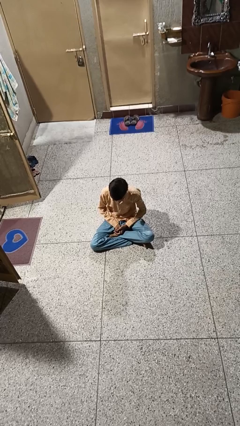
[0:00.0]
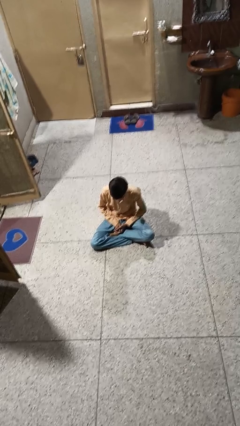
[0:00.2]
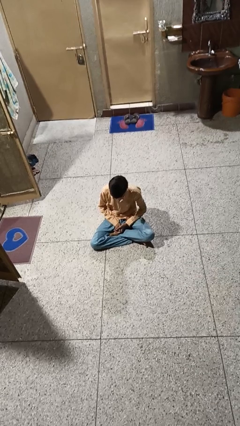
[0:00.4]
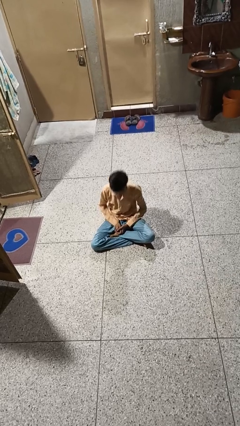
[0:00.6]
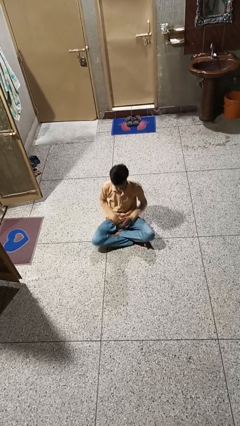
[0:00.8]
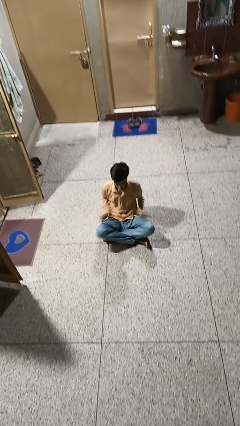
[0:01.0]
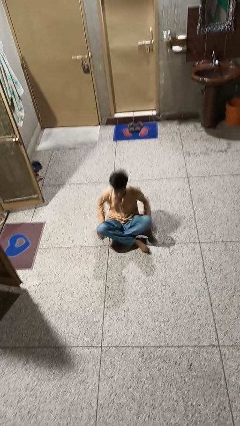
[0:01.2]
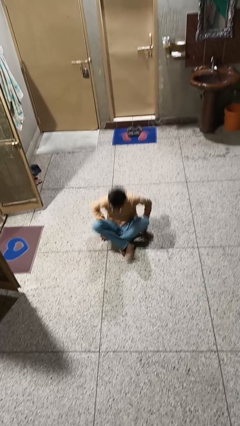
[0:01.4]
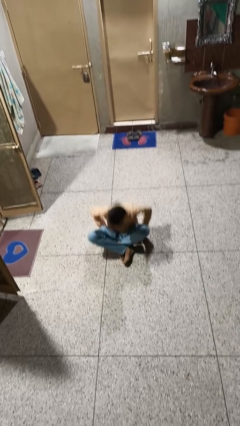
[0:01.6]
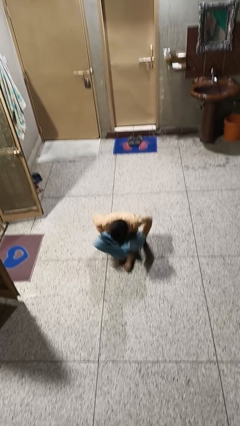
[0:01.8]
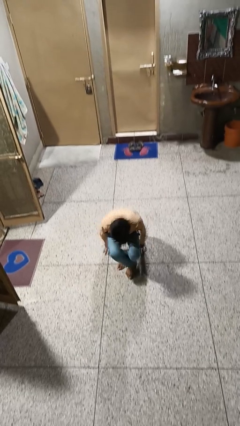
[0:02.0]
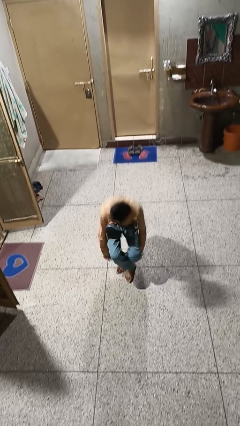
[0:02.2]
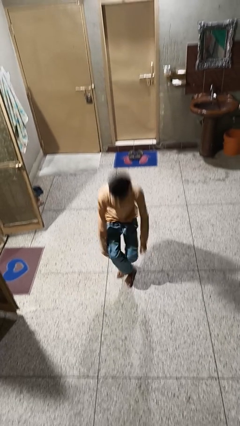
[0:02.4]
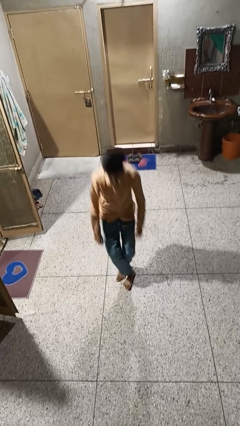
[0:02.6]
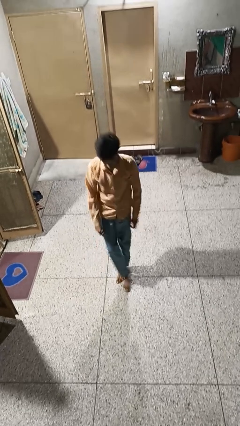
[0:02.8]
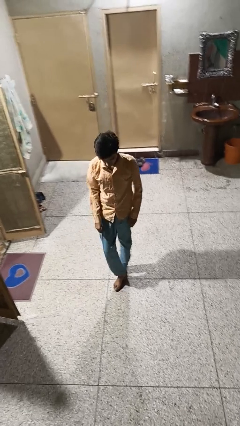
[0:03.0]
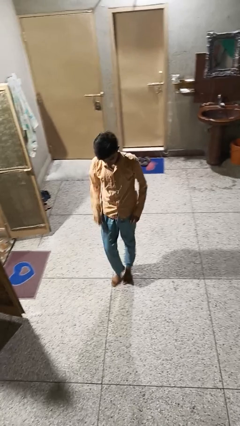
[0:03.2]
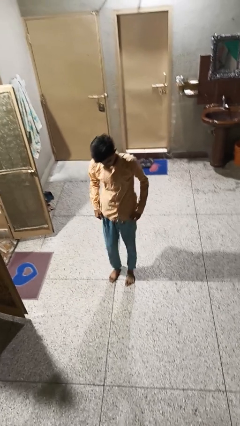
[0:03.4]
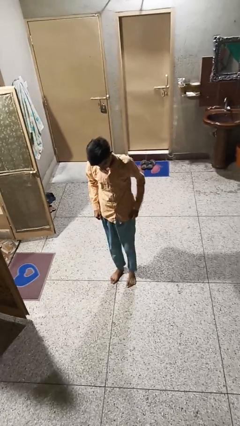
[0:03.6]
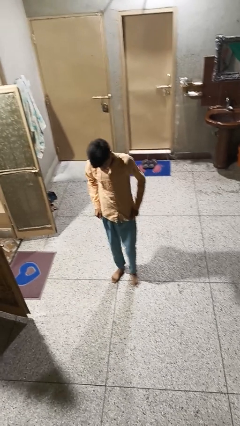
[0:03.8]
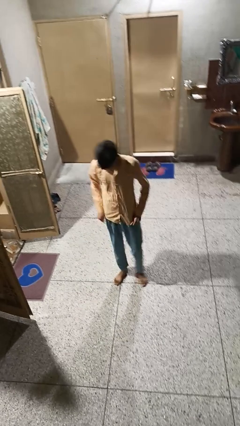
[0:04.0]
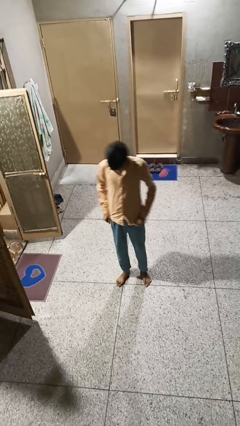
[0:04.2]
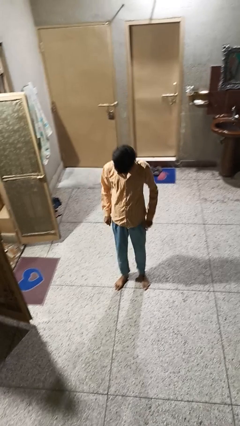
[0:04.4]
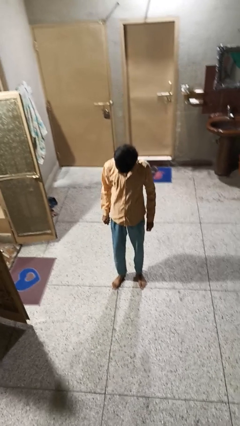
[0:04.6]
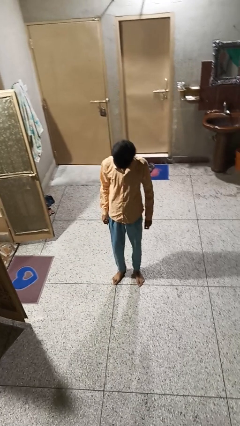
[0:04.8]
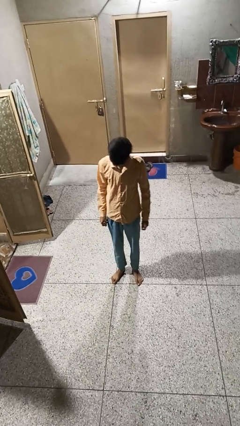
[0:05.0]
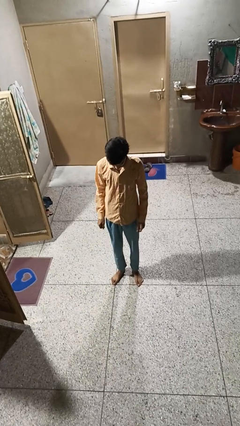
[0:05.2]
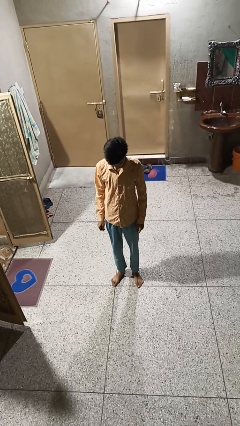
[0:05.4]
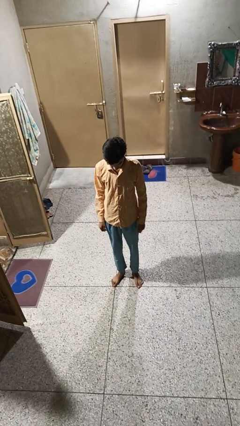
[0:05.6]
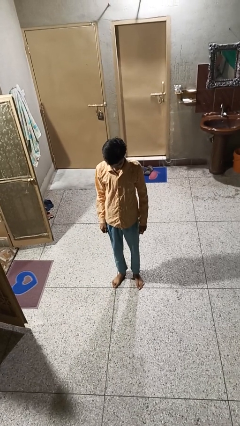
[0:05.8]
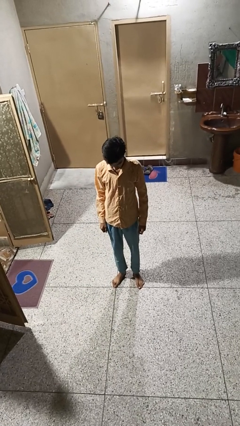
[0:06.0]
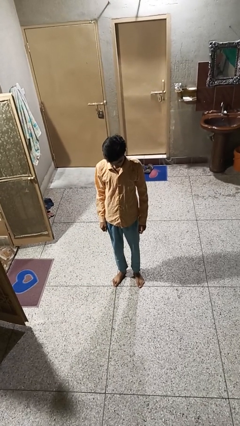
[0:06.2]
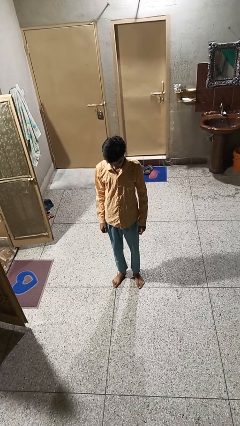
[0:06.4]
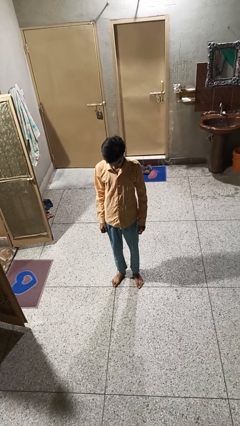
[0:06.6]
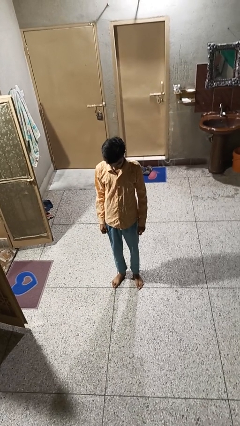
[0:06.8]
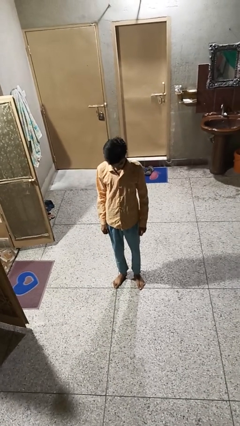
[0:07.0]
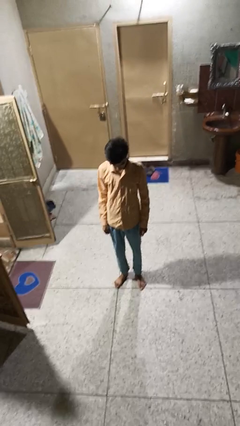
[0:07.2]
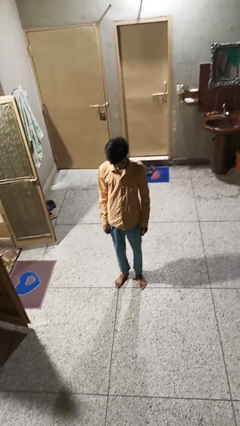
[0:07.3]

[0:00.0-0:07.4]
person stands up from floor

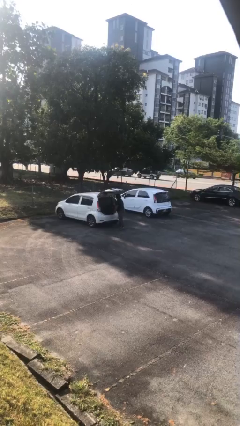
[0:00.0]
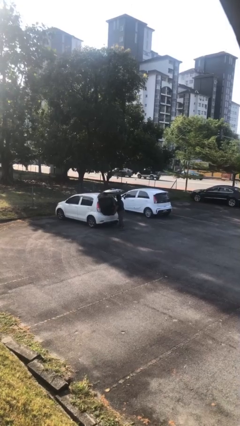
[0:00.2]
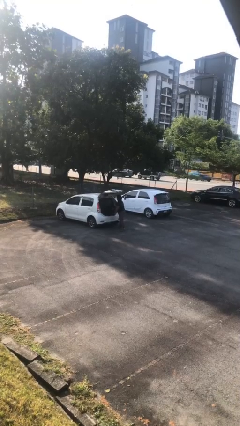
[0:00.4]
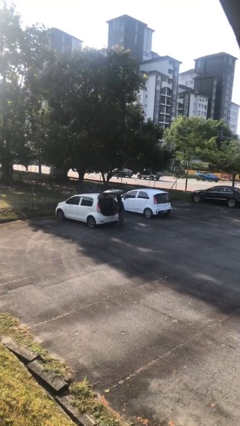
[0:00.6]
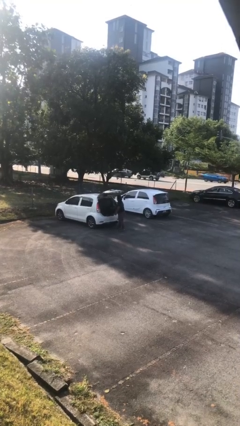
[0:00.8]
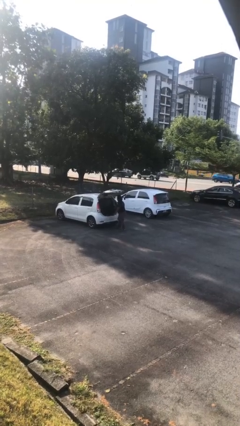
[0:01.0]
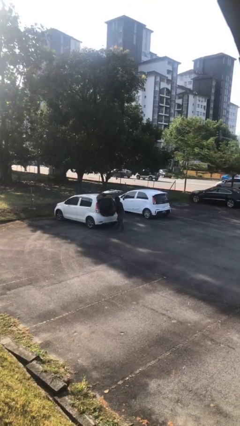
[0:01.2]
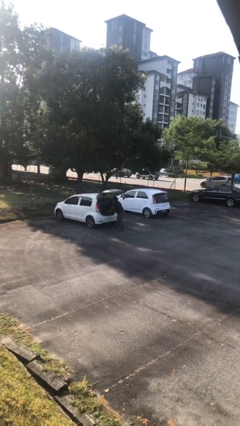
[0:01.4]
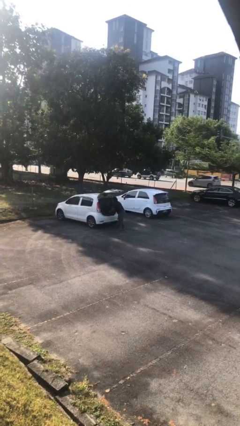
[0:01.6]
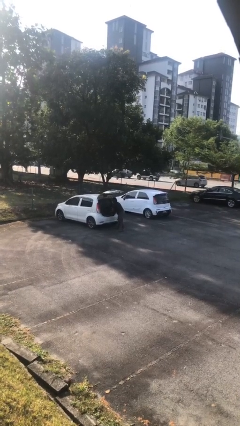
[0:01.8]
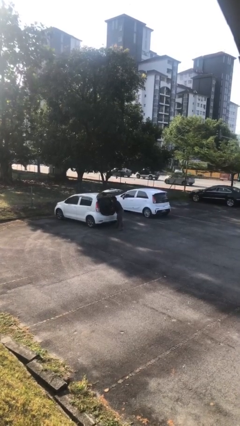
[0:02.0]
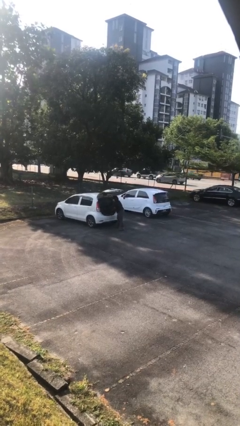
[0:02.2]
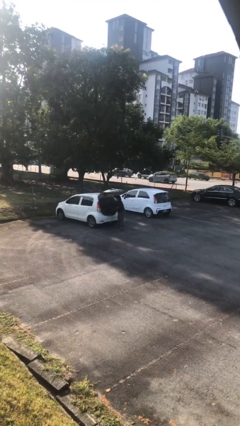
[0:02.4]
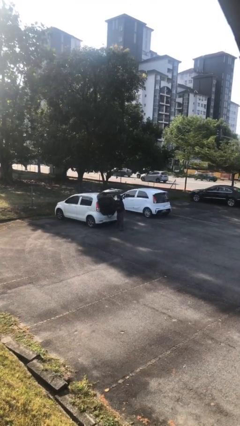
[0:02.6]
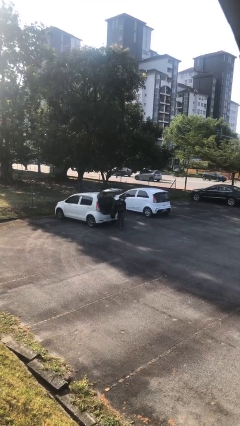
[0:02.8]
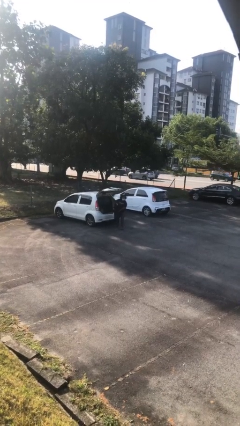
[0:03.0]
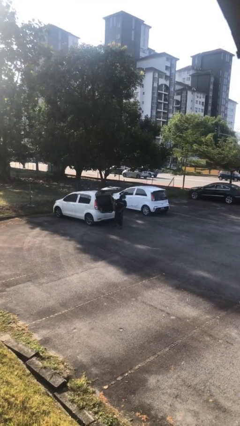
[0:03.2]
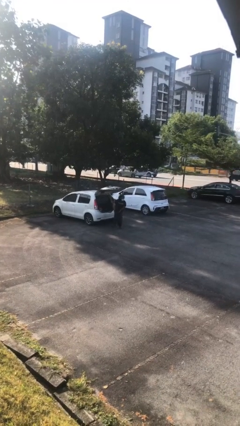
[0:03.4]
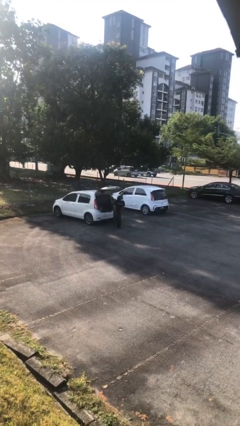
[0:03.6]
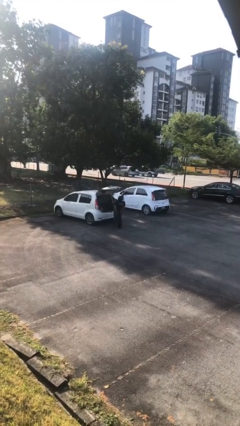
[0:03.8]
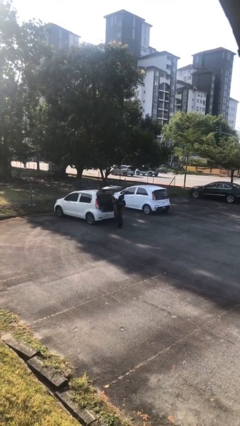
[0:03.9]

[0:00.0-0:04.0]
person unloads car

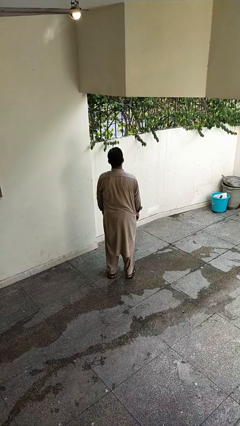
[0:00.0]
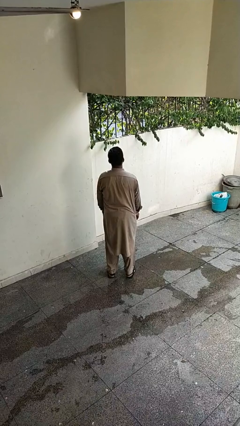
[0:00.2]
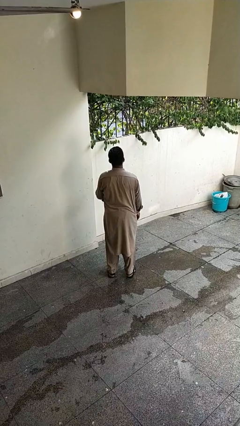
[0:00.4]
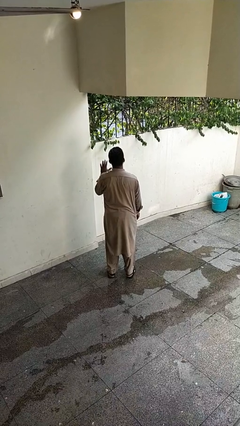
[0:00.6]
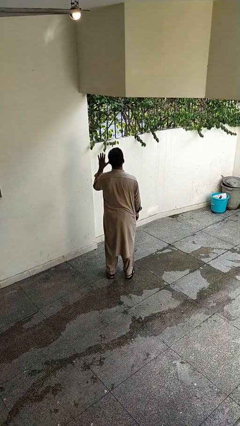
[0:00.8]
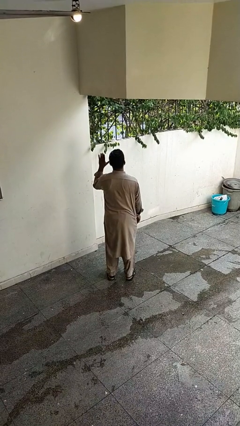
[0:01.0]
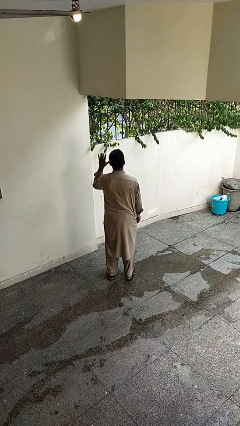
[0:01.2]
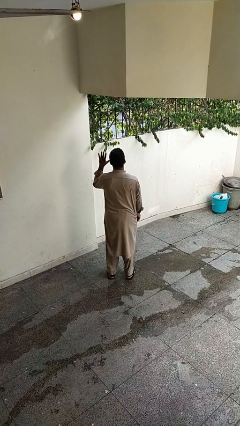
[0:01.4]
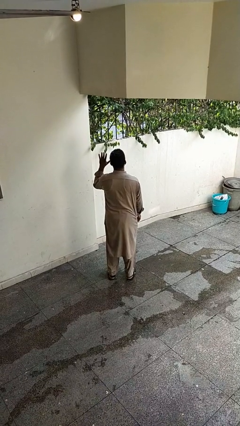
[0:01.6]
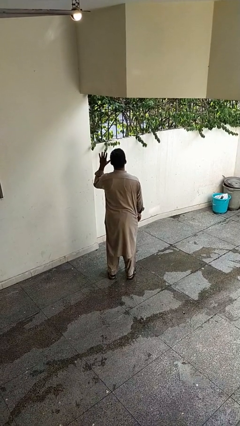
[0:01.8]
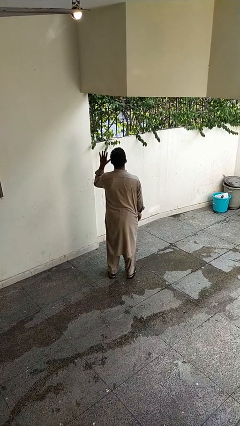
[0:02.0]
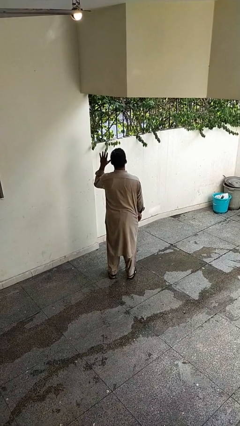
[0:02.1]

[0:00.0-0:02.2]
person gestures number five

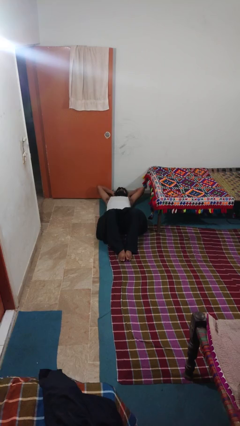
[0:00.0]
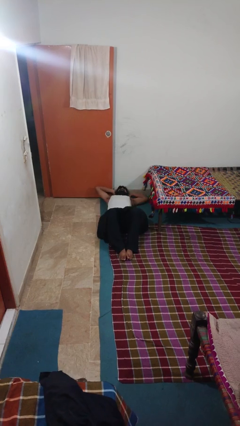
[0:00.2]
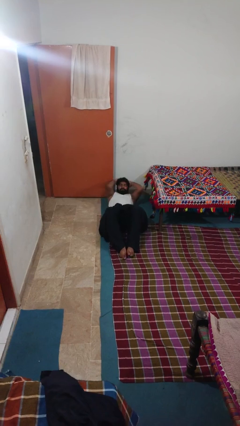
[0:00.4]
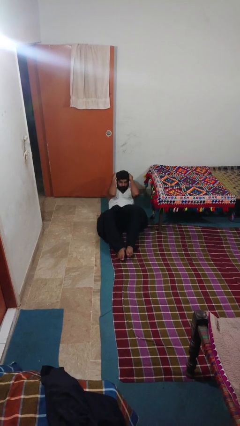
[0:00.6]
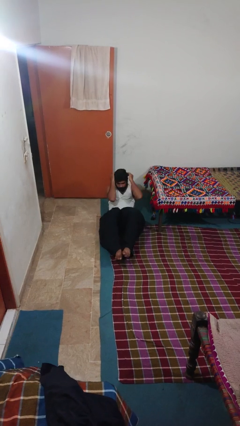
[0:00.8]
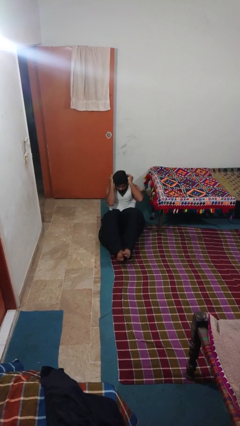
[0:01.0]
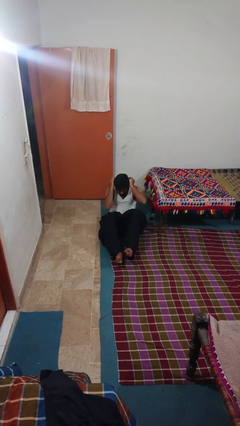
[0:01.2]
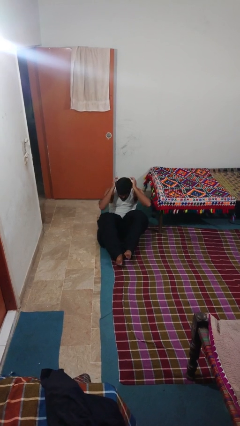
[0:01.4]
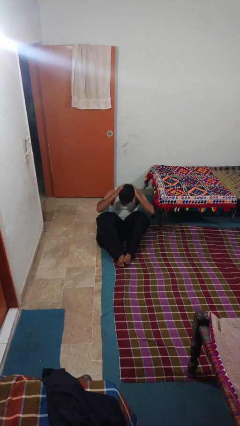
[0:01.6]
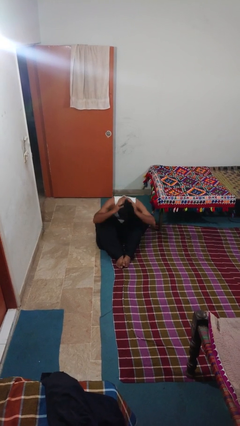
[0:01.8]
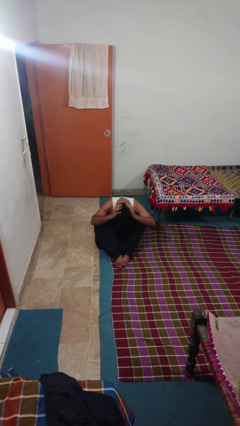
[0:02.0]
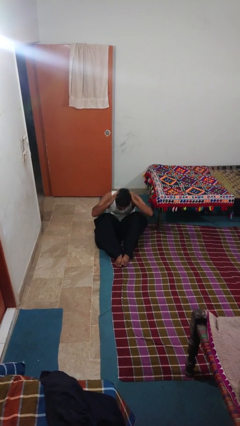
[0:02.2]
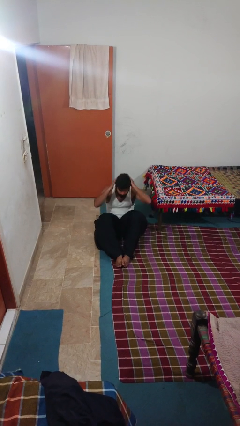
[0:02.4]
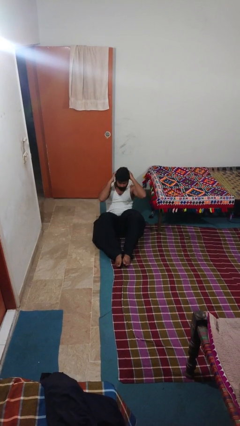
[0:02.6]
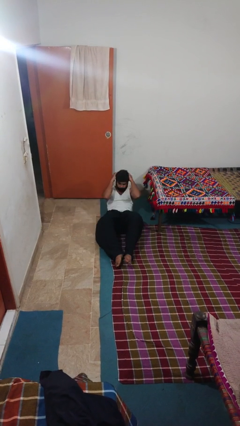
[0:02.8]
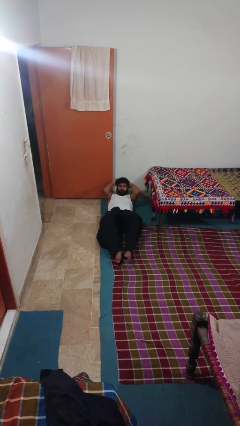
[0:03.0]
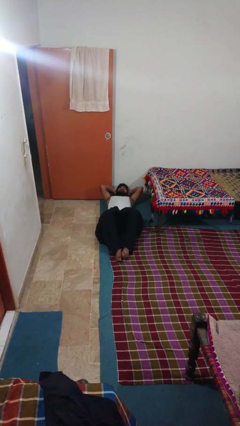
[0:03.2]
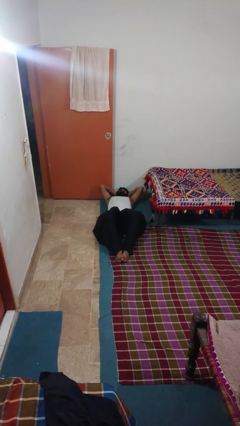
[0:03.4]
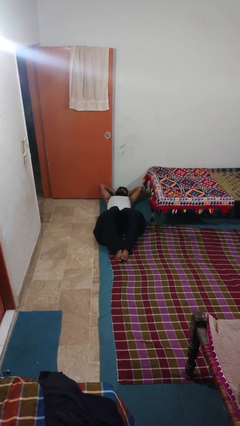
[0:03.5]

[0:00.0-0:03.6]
person exercises with situp

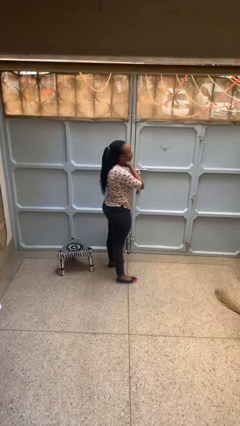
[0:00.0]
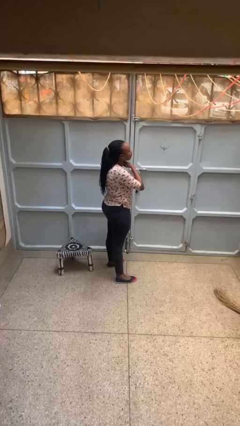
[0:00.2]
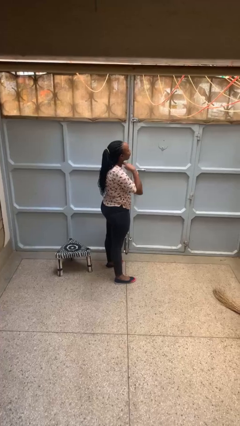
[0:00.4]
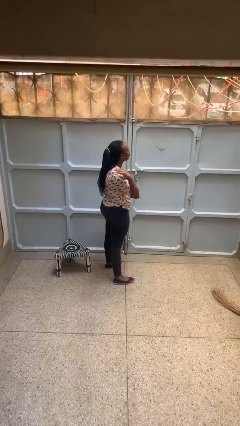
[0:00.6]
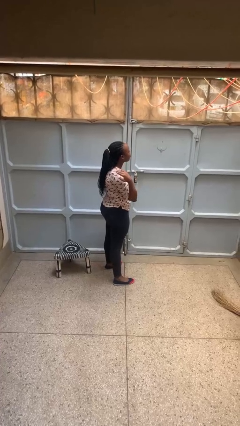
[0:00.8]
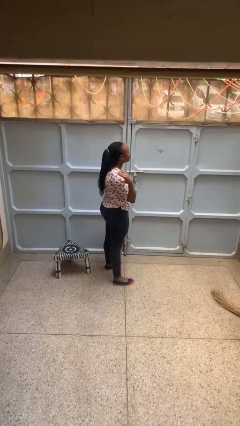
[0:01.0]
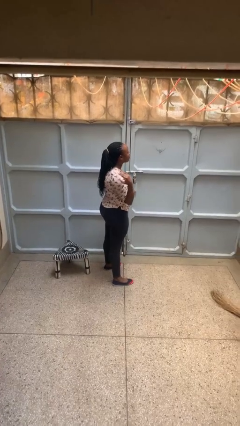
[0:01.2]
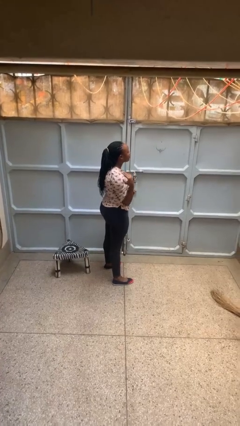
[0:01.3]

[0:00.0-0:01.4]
person gestures cut
